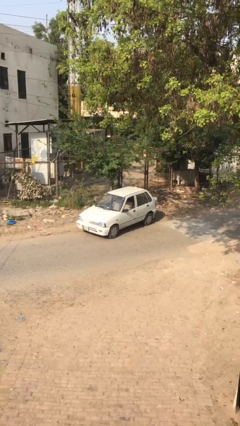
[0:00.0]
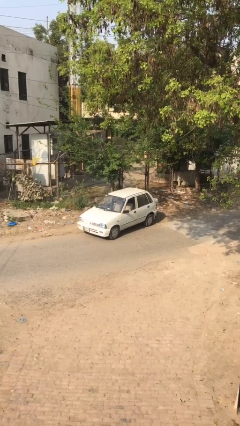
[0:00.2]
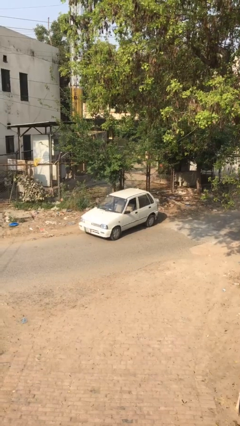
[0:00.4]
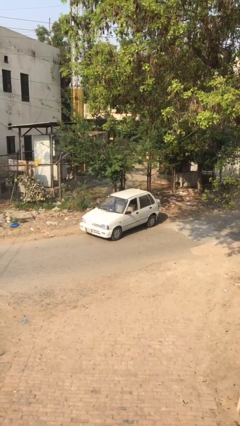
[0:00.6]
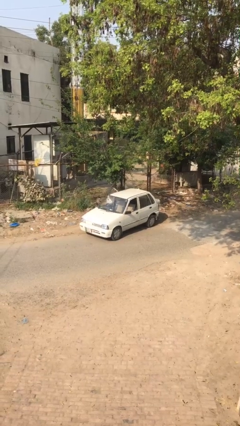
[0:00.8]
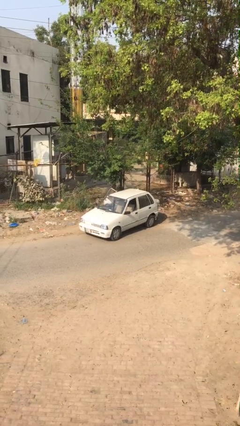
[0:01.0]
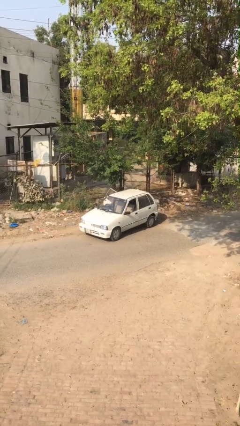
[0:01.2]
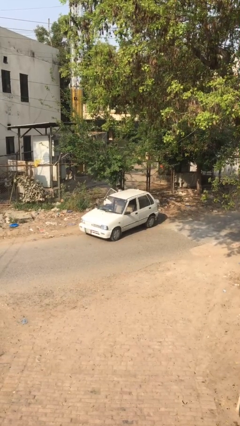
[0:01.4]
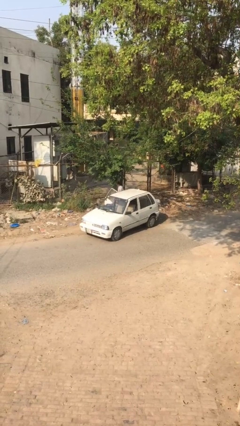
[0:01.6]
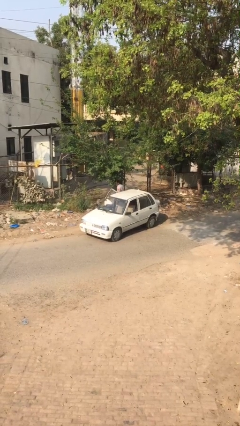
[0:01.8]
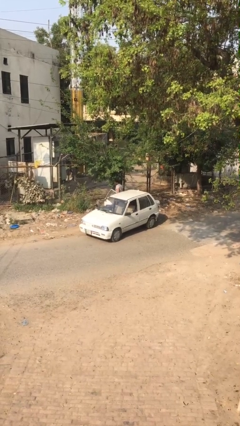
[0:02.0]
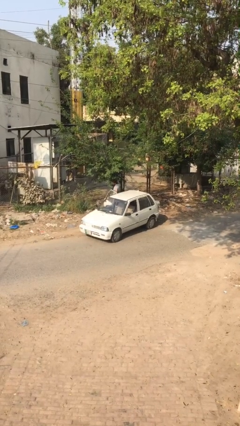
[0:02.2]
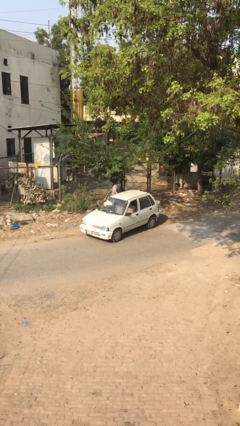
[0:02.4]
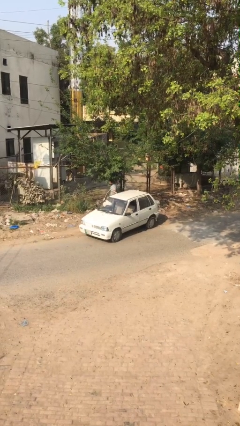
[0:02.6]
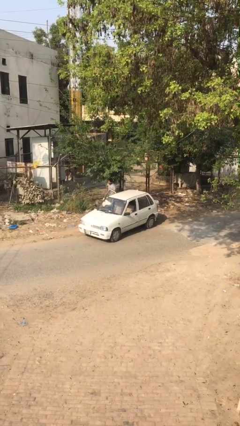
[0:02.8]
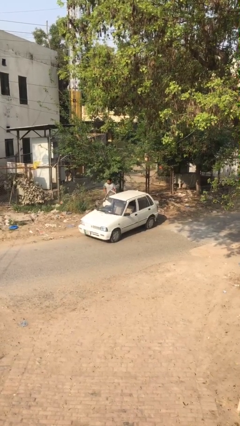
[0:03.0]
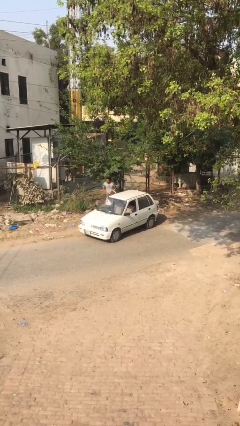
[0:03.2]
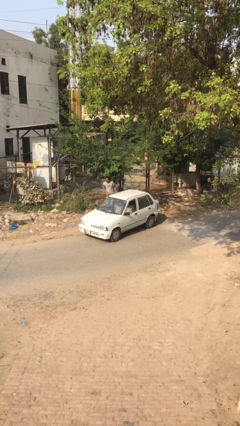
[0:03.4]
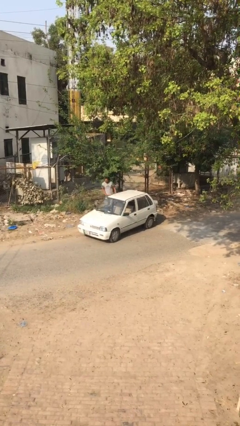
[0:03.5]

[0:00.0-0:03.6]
car drops off person

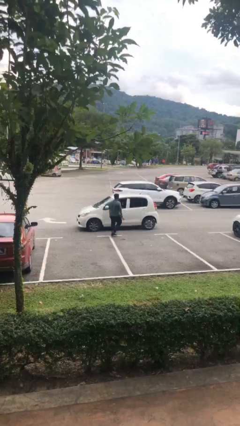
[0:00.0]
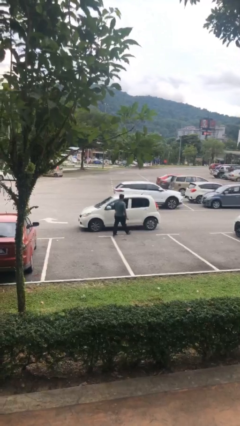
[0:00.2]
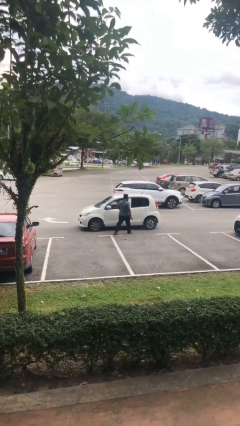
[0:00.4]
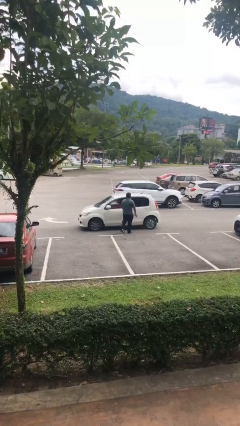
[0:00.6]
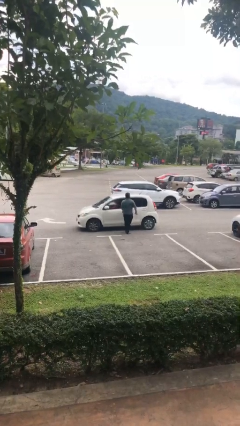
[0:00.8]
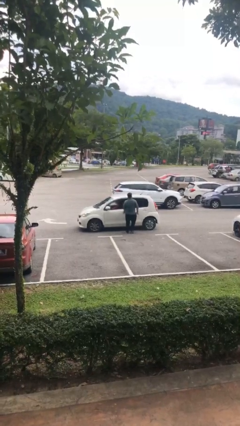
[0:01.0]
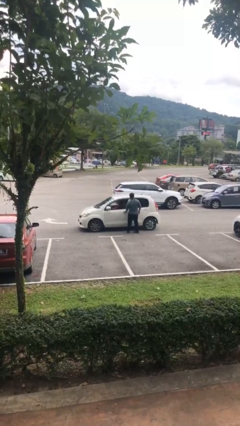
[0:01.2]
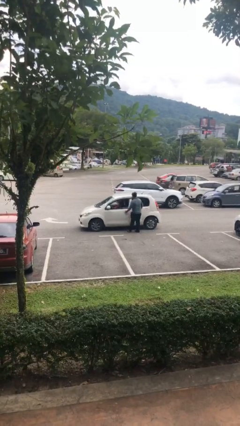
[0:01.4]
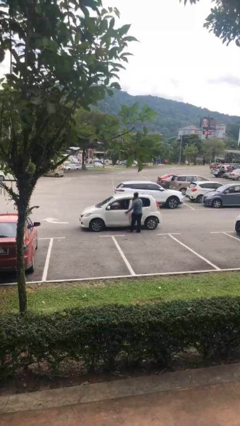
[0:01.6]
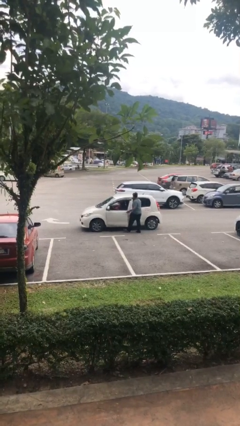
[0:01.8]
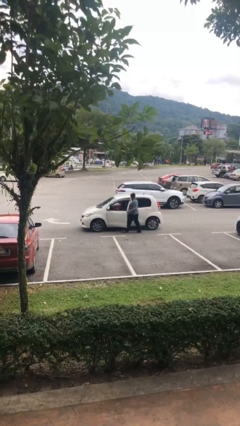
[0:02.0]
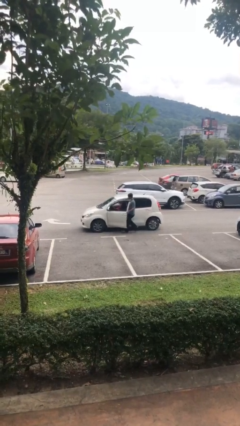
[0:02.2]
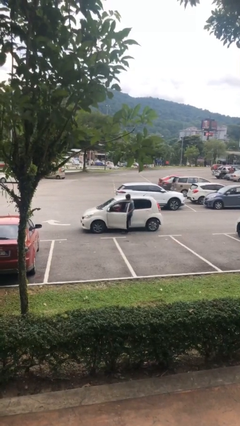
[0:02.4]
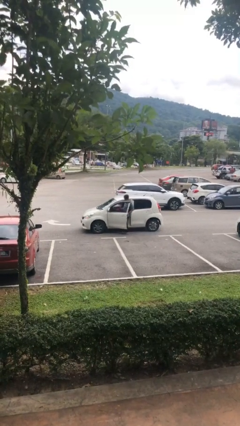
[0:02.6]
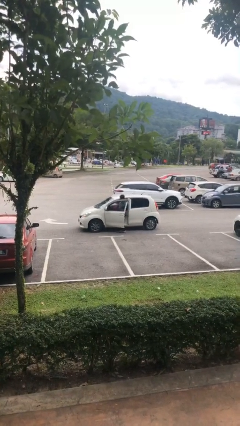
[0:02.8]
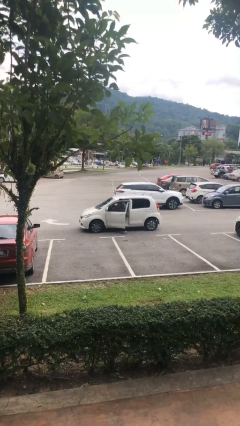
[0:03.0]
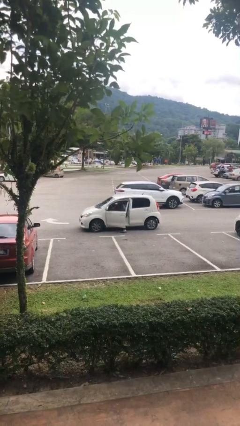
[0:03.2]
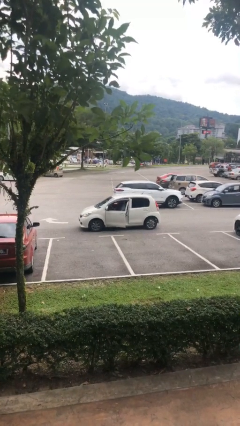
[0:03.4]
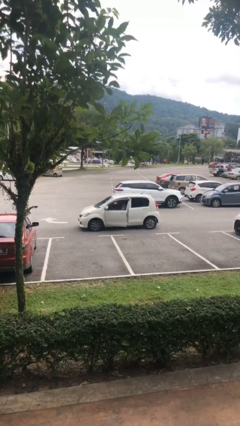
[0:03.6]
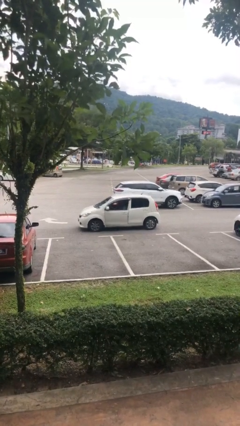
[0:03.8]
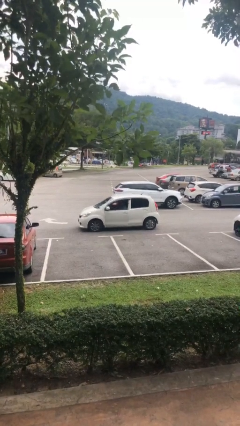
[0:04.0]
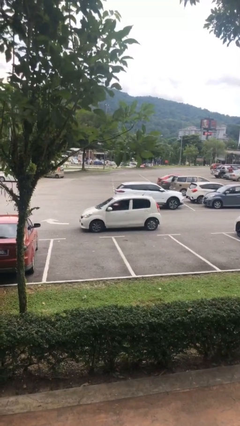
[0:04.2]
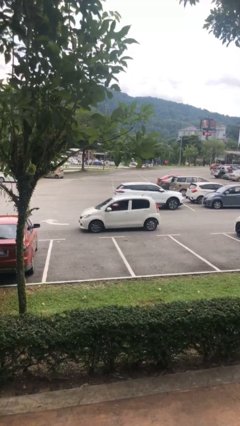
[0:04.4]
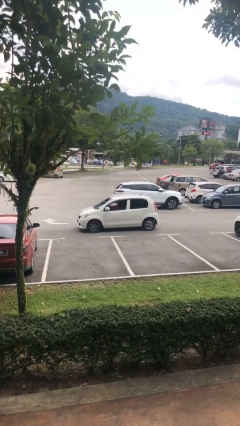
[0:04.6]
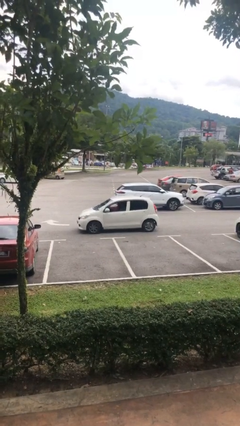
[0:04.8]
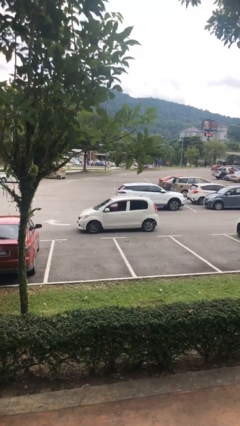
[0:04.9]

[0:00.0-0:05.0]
car picks up person

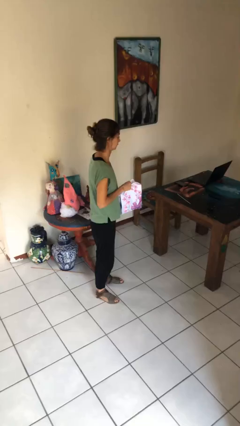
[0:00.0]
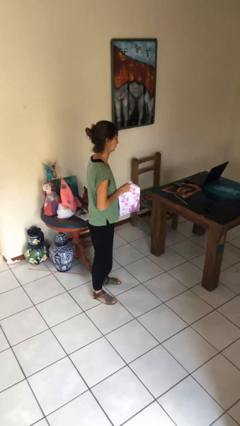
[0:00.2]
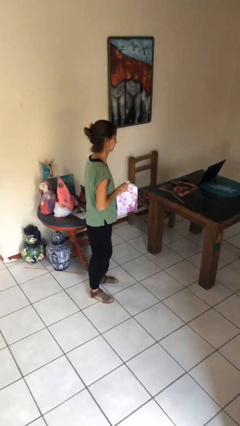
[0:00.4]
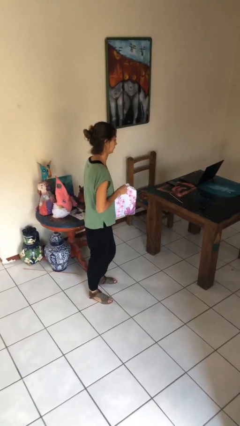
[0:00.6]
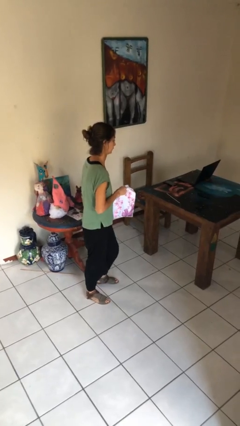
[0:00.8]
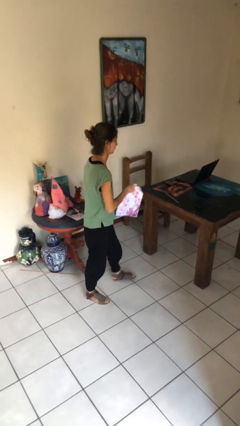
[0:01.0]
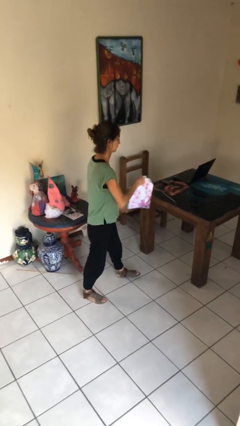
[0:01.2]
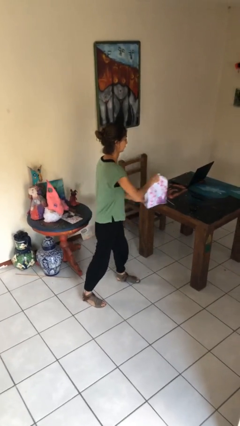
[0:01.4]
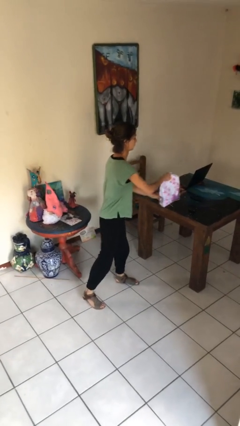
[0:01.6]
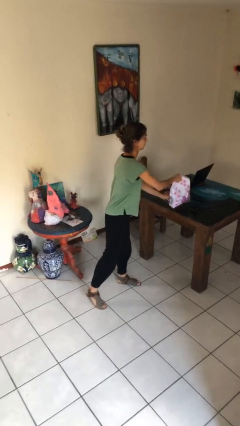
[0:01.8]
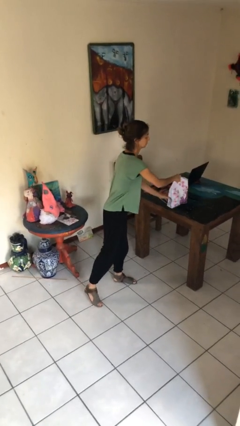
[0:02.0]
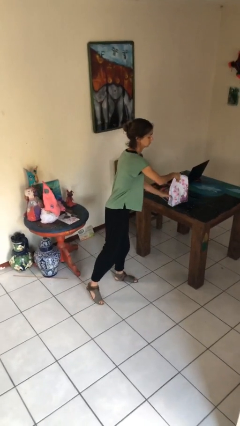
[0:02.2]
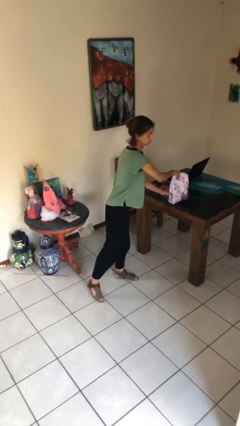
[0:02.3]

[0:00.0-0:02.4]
person puts down object on table

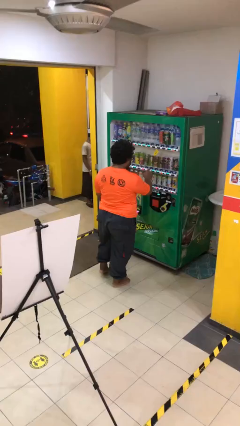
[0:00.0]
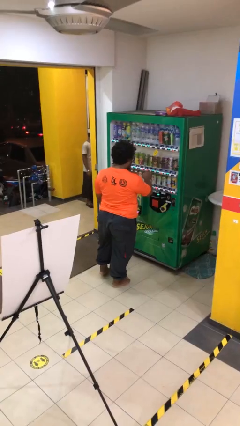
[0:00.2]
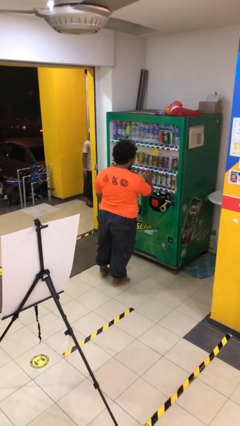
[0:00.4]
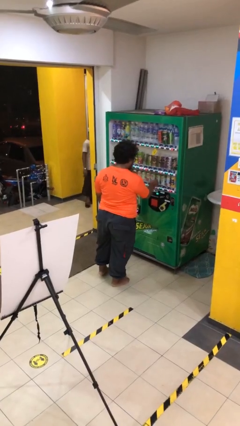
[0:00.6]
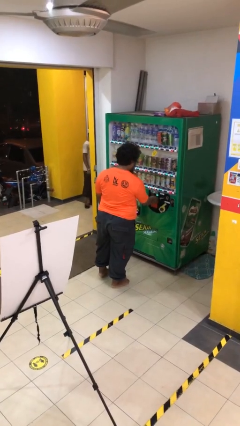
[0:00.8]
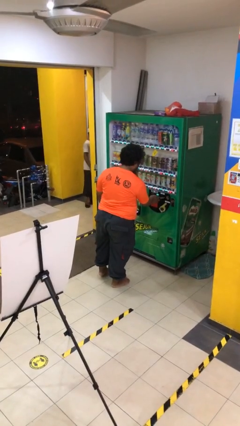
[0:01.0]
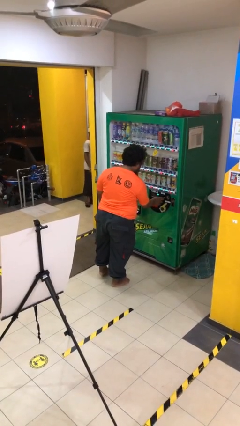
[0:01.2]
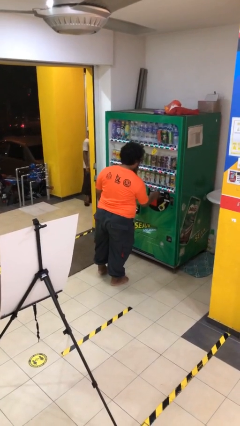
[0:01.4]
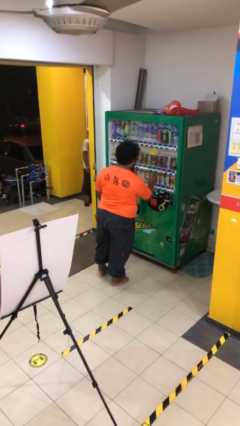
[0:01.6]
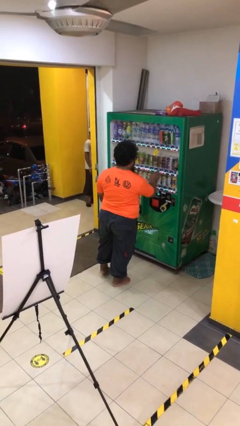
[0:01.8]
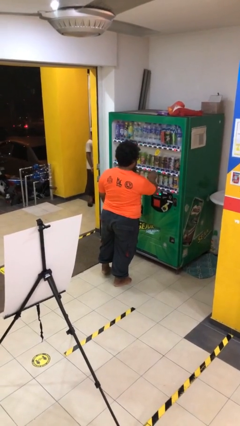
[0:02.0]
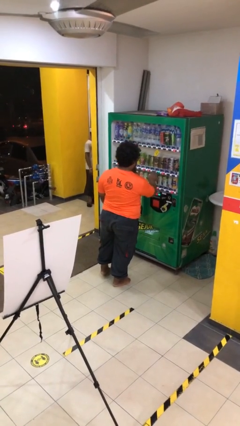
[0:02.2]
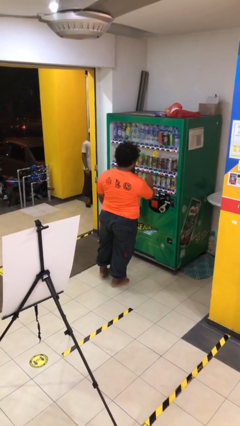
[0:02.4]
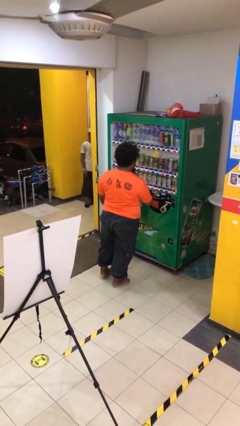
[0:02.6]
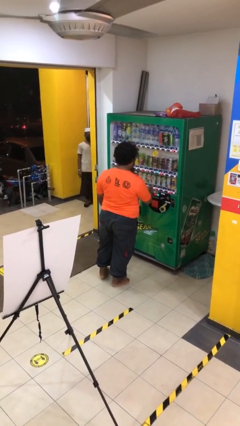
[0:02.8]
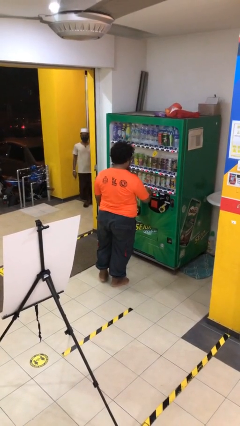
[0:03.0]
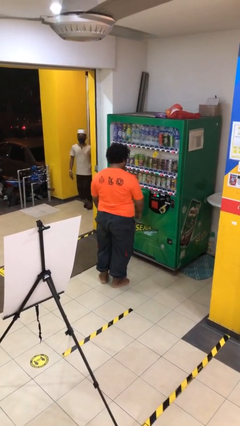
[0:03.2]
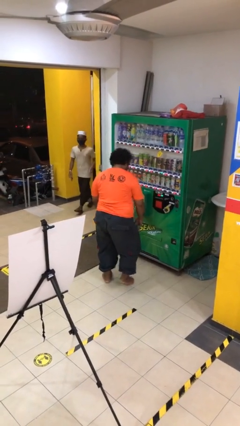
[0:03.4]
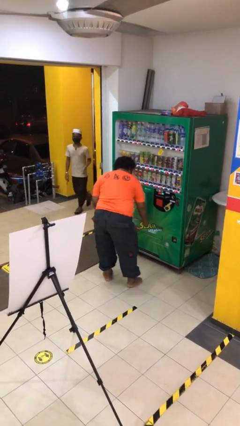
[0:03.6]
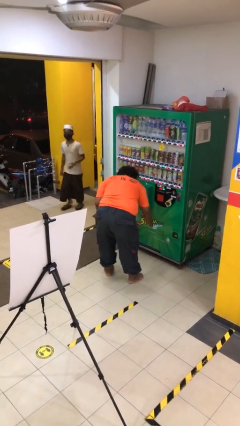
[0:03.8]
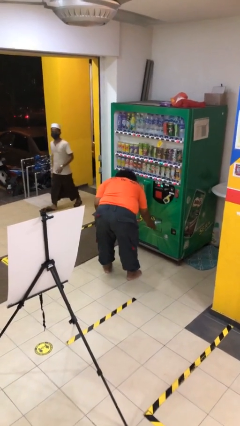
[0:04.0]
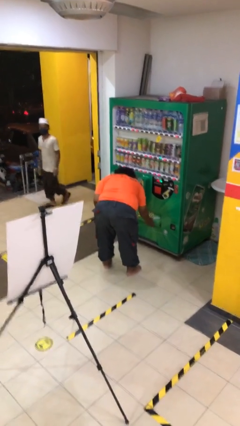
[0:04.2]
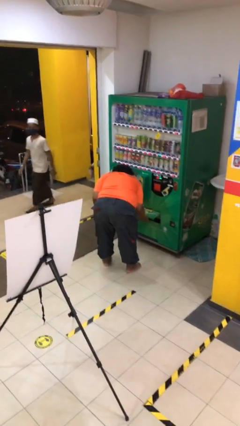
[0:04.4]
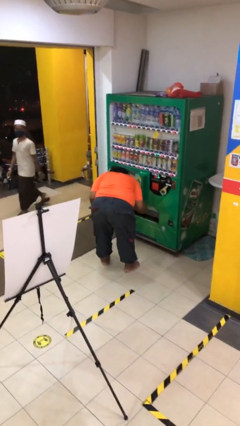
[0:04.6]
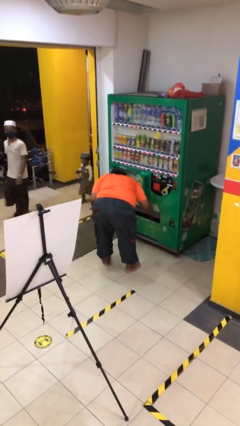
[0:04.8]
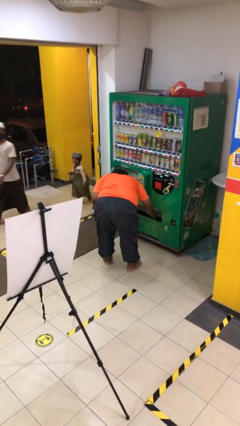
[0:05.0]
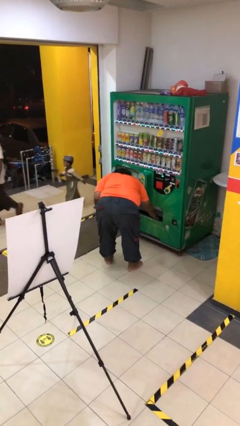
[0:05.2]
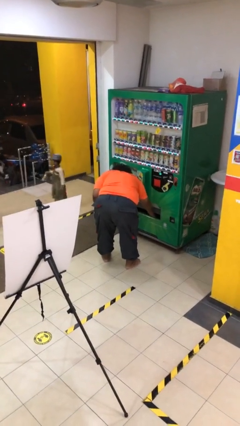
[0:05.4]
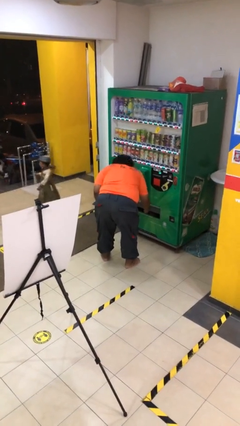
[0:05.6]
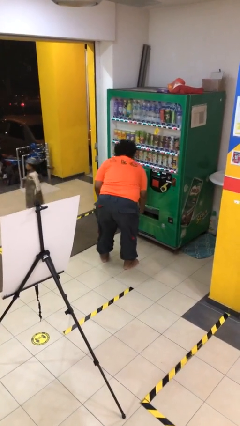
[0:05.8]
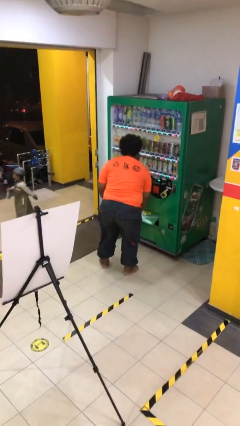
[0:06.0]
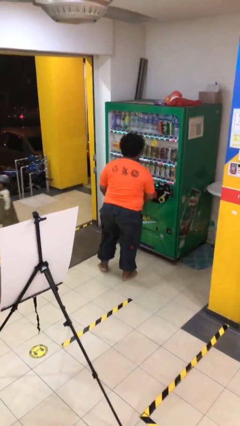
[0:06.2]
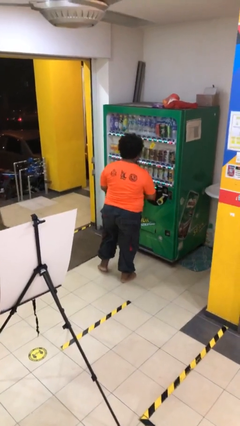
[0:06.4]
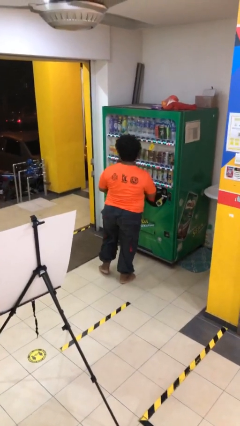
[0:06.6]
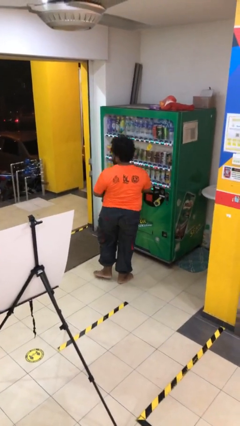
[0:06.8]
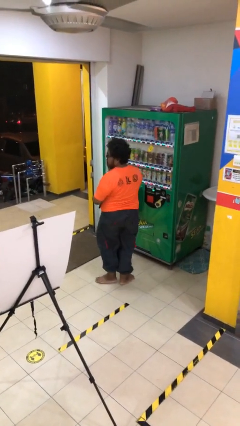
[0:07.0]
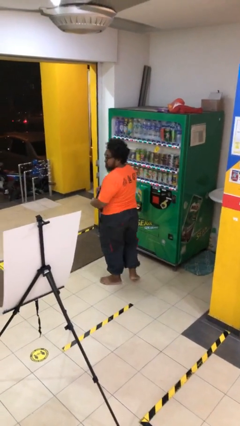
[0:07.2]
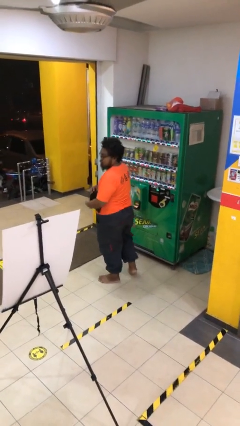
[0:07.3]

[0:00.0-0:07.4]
person purchases from machine
